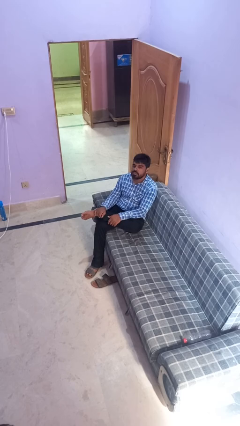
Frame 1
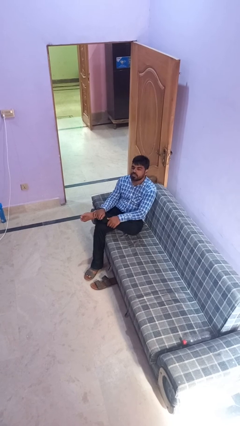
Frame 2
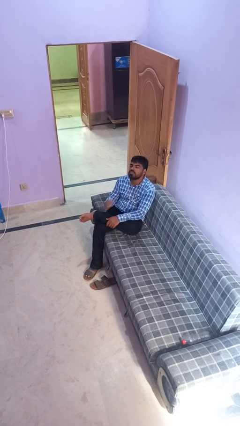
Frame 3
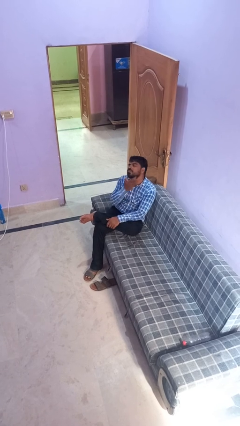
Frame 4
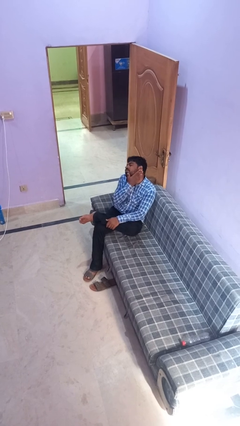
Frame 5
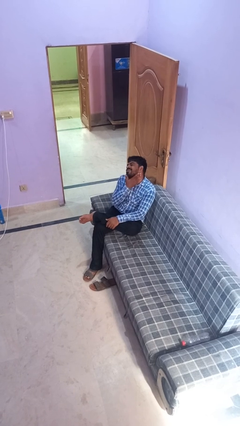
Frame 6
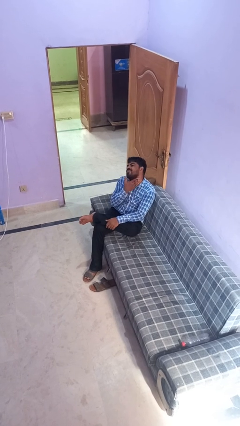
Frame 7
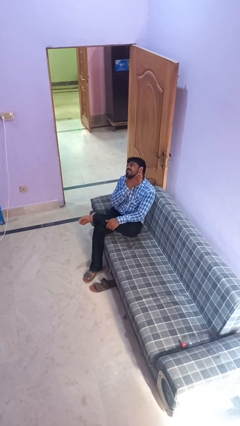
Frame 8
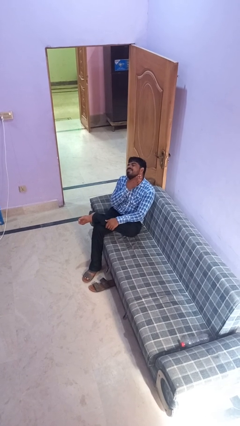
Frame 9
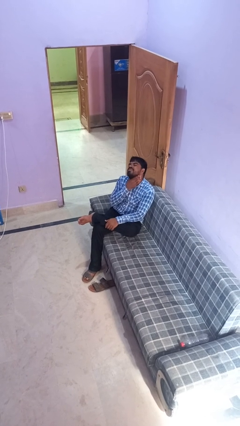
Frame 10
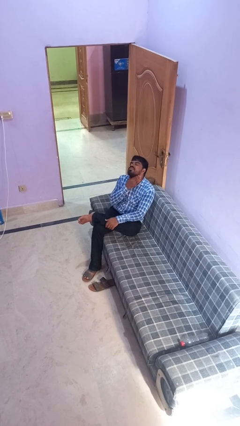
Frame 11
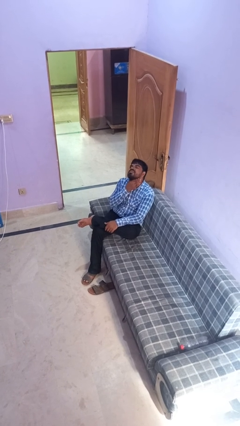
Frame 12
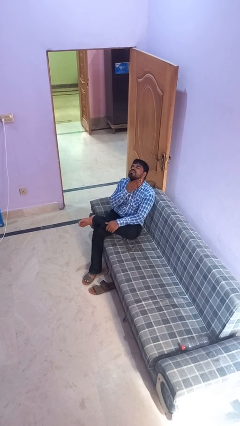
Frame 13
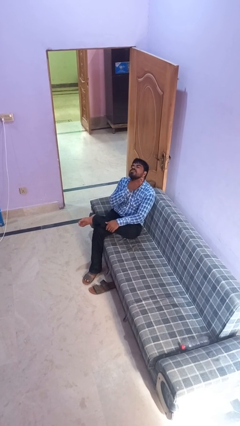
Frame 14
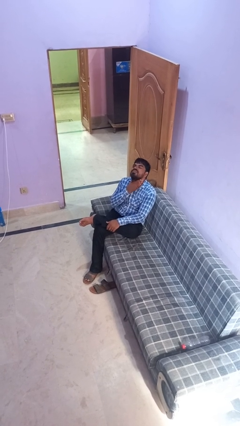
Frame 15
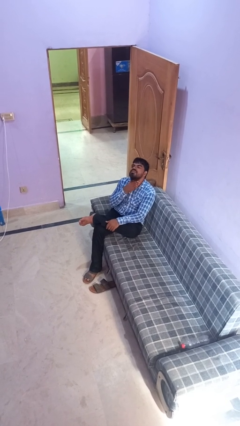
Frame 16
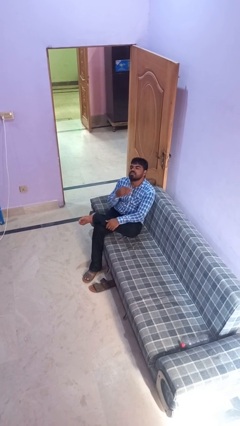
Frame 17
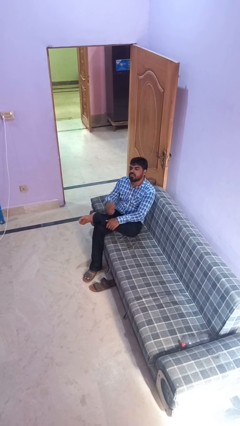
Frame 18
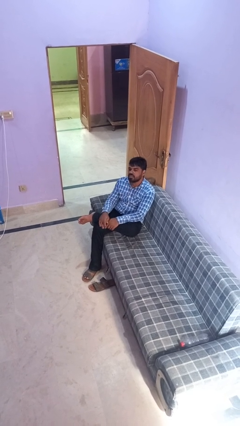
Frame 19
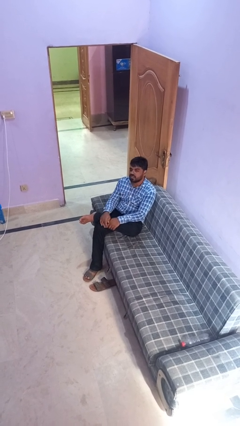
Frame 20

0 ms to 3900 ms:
person rubs neck

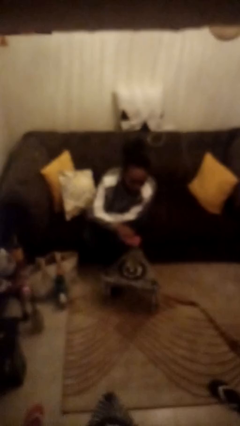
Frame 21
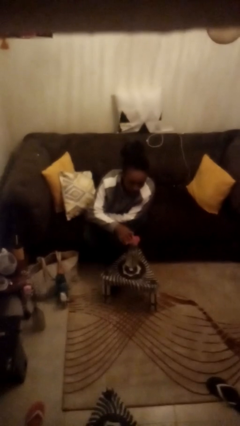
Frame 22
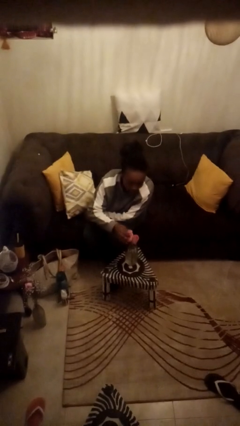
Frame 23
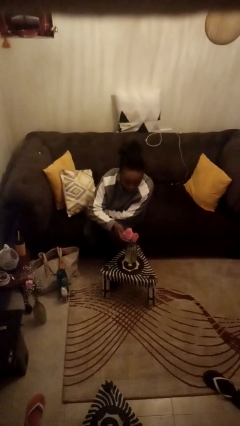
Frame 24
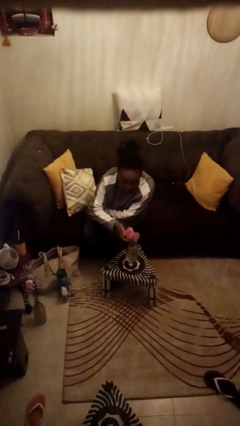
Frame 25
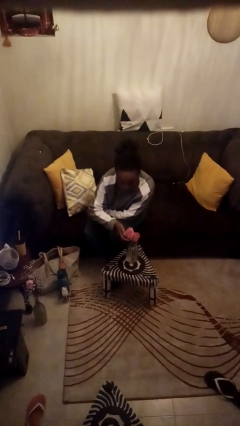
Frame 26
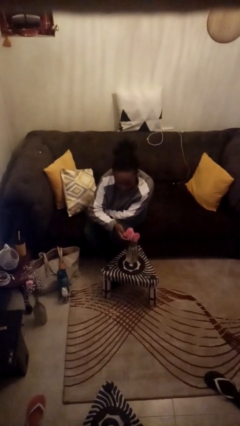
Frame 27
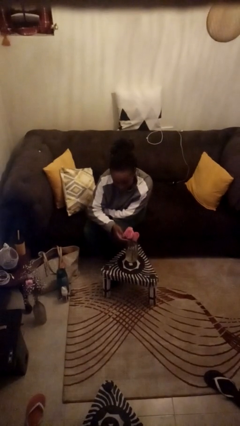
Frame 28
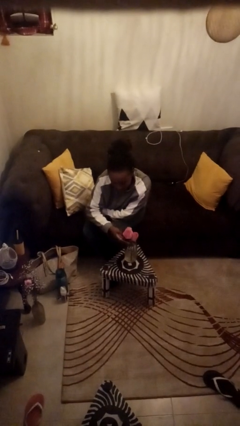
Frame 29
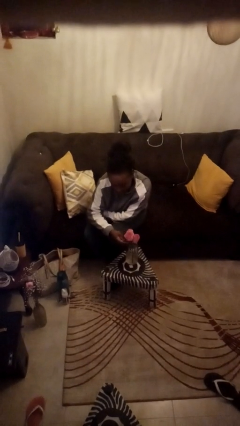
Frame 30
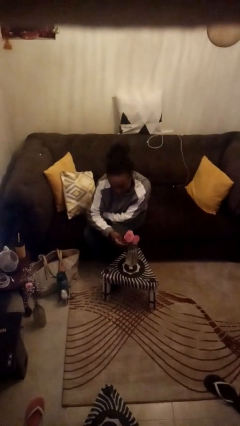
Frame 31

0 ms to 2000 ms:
person arranges flowers in vase

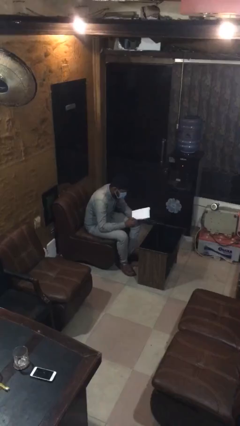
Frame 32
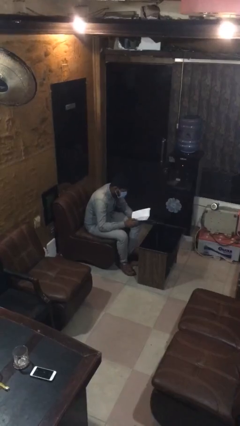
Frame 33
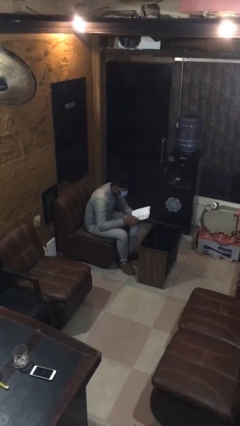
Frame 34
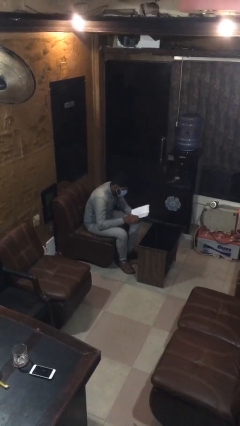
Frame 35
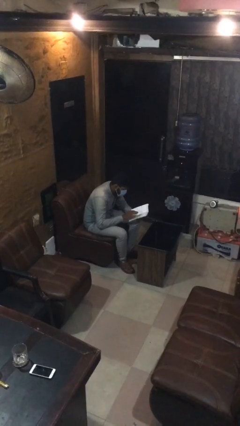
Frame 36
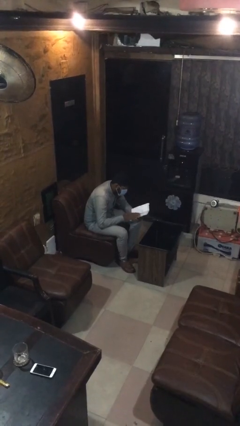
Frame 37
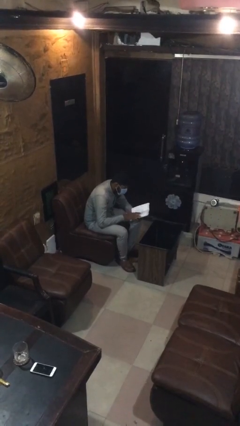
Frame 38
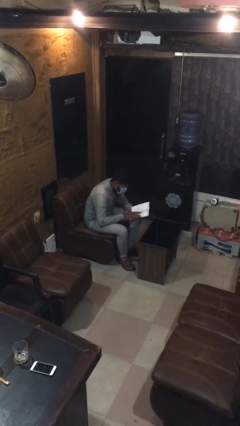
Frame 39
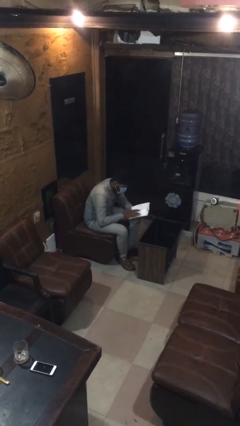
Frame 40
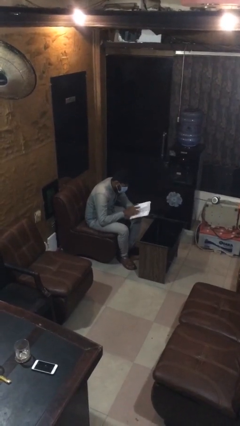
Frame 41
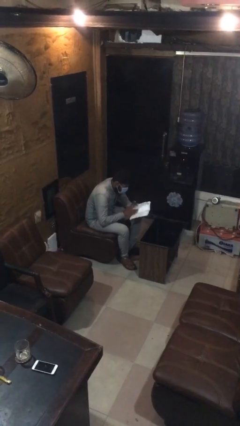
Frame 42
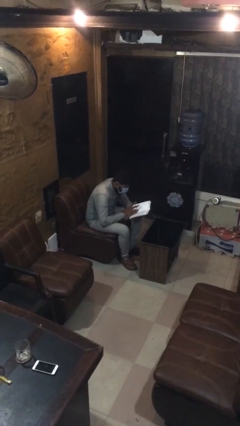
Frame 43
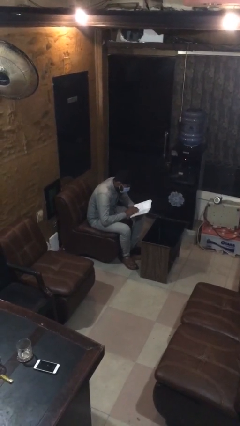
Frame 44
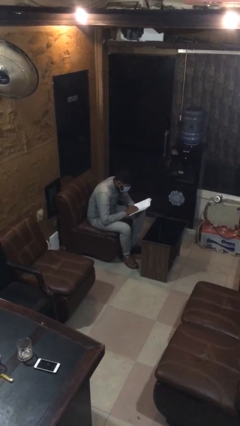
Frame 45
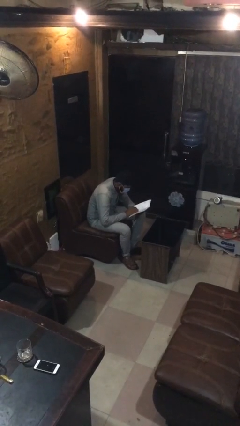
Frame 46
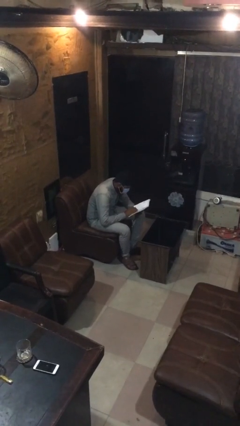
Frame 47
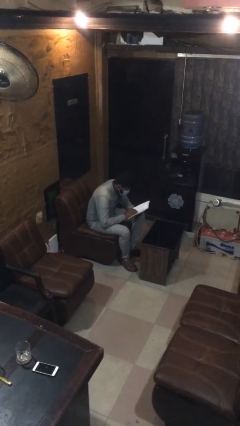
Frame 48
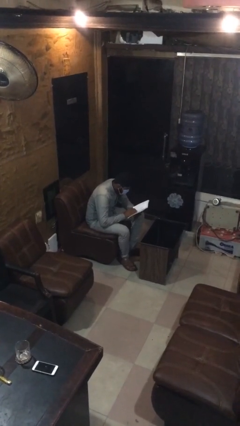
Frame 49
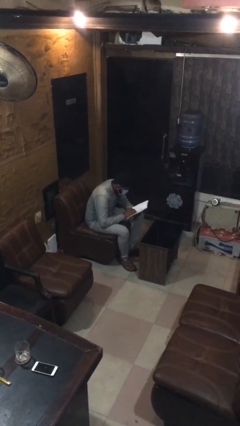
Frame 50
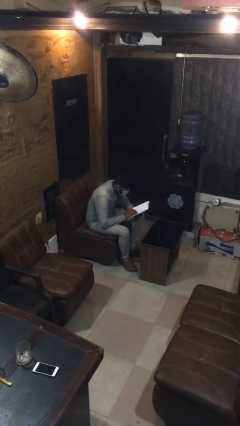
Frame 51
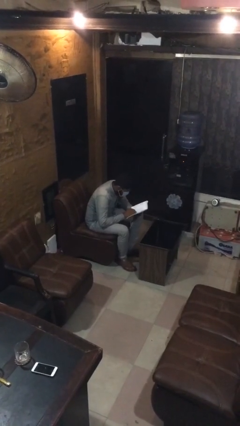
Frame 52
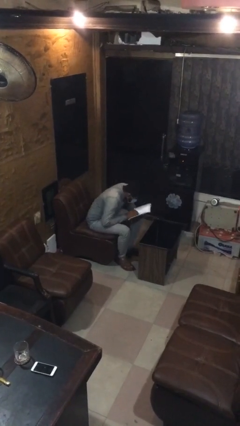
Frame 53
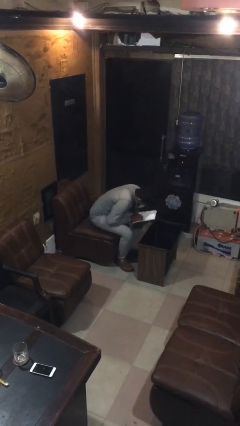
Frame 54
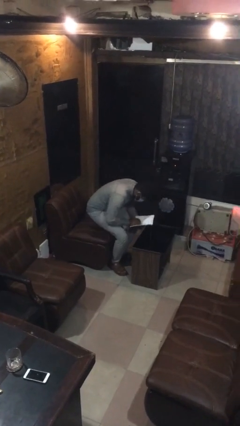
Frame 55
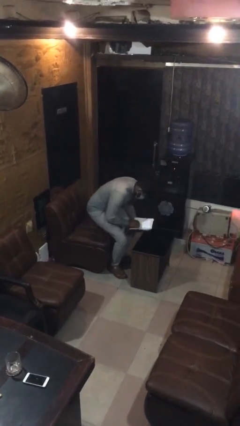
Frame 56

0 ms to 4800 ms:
person reads document

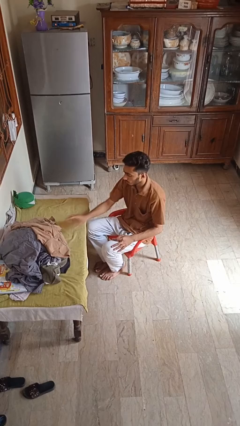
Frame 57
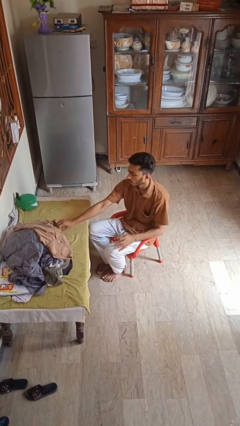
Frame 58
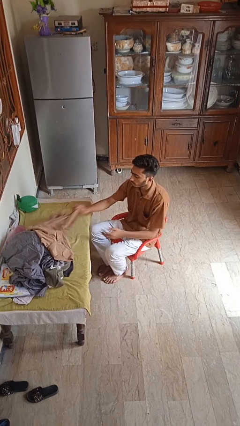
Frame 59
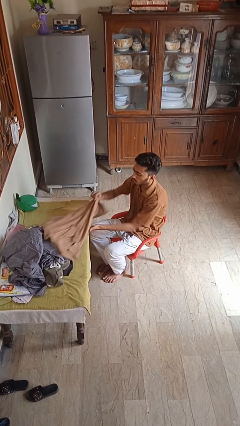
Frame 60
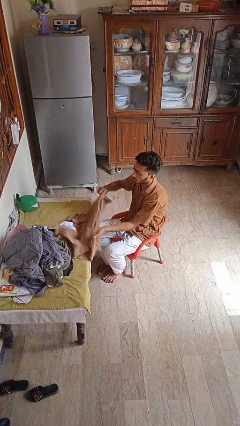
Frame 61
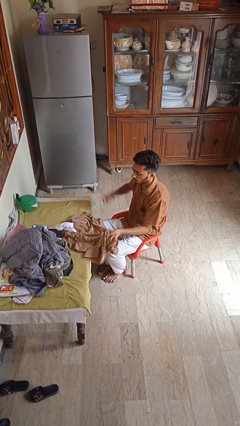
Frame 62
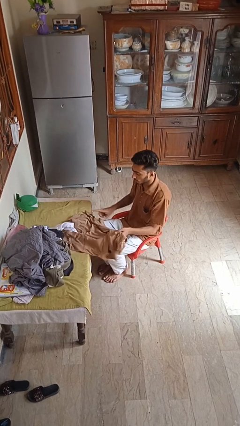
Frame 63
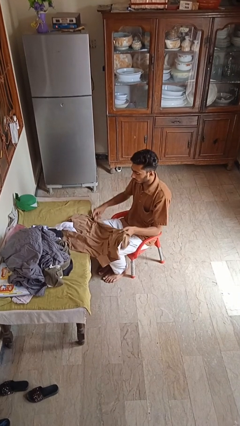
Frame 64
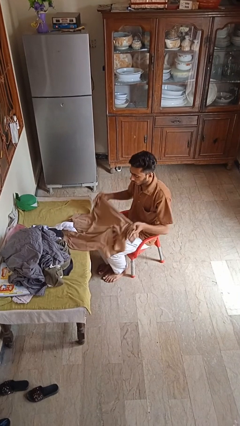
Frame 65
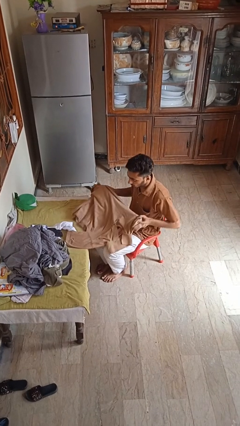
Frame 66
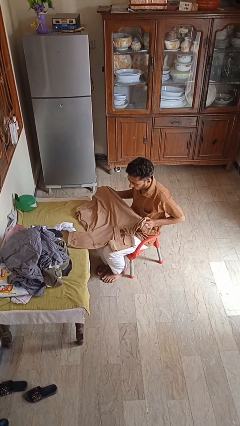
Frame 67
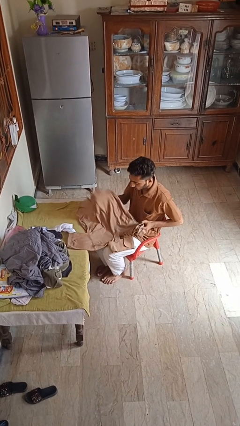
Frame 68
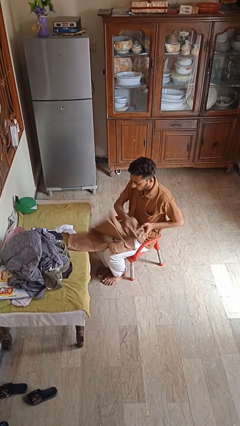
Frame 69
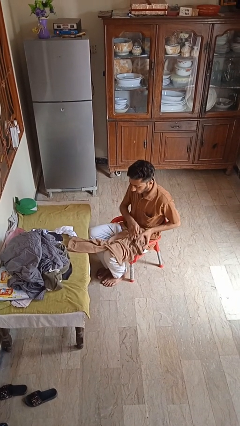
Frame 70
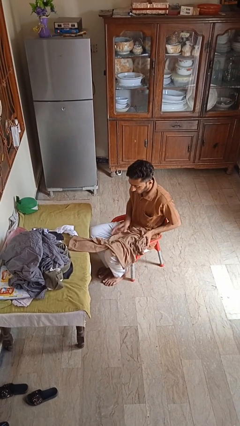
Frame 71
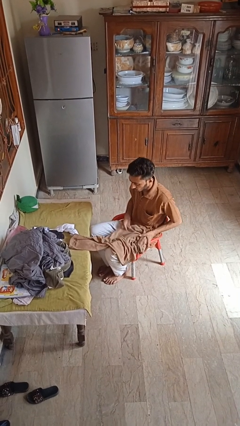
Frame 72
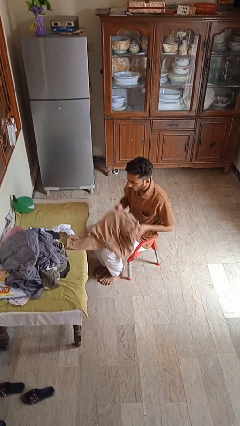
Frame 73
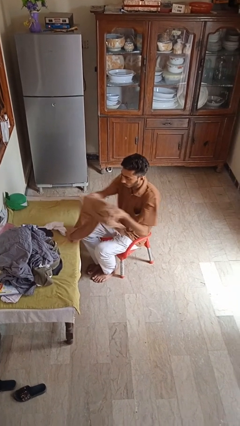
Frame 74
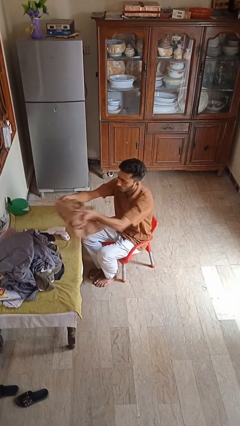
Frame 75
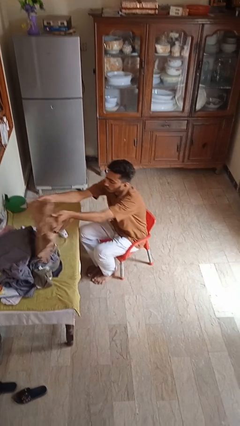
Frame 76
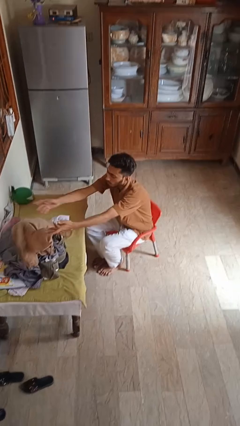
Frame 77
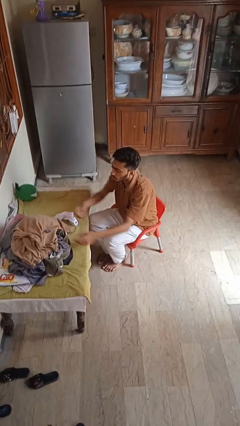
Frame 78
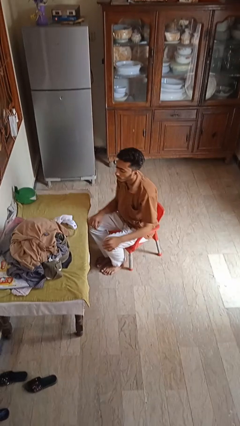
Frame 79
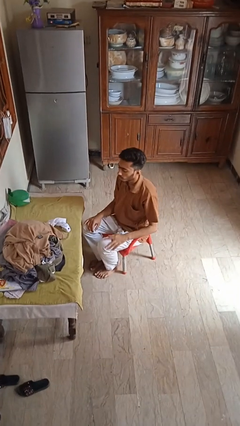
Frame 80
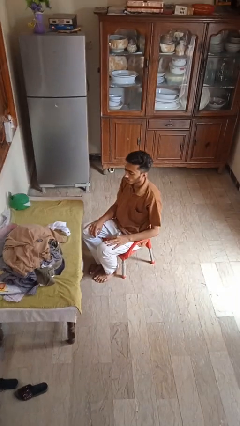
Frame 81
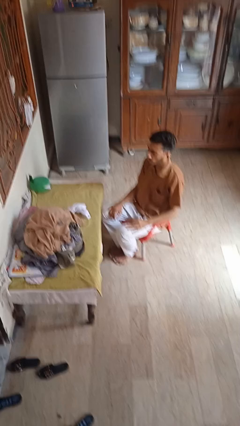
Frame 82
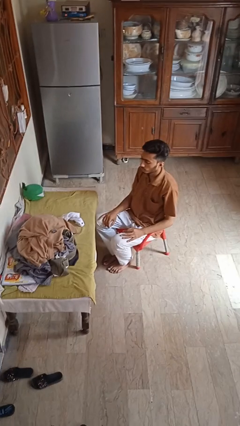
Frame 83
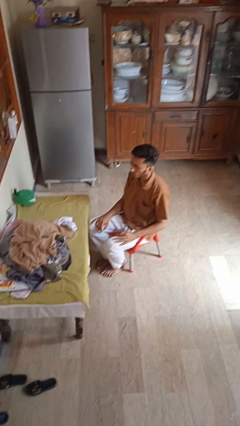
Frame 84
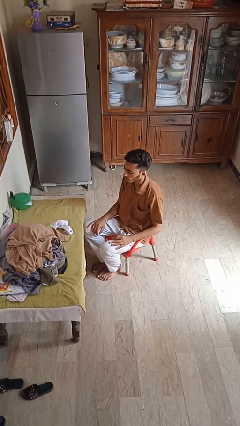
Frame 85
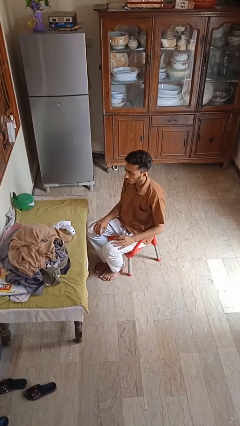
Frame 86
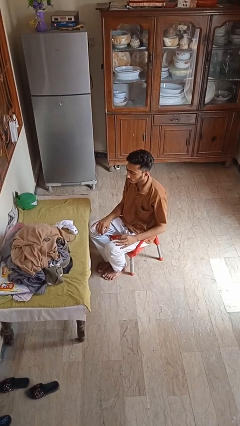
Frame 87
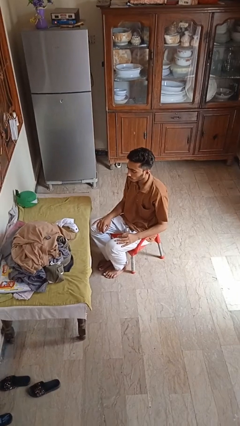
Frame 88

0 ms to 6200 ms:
person folds shirt

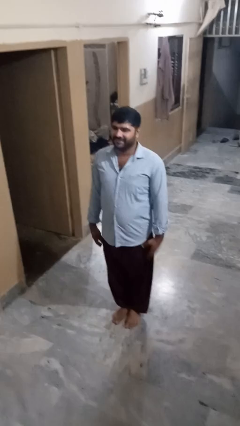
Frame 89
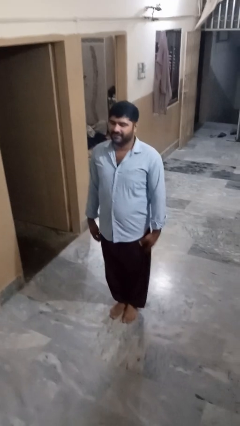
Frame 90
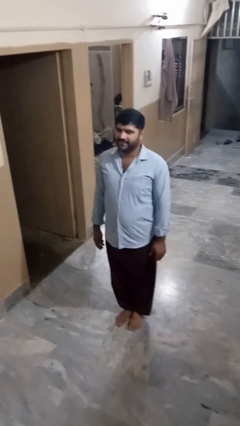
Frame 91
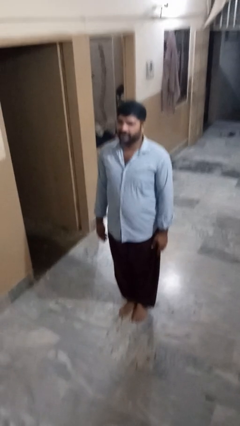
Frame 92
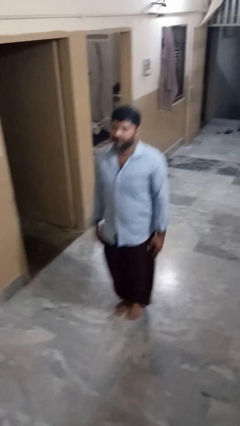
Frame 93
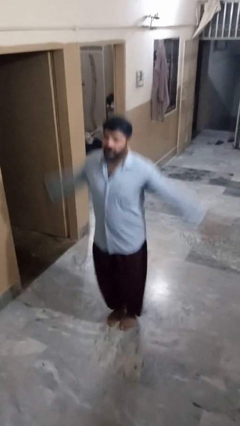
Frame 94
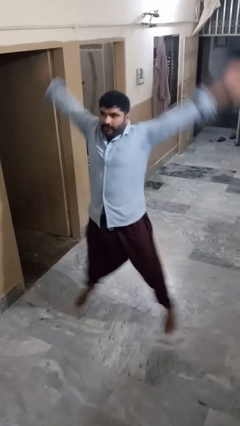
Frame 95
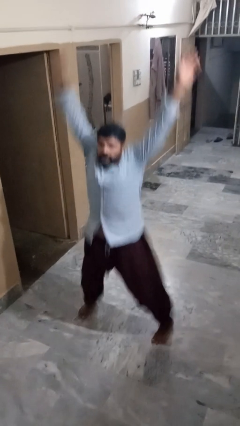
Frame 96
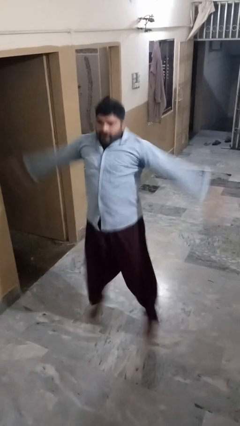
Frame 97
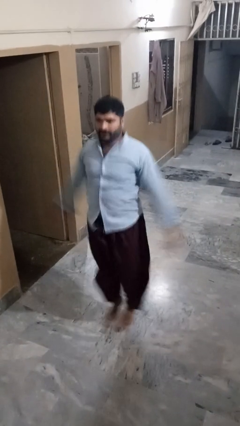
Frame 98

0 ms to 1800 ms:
person exercises with jumping jacks
